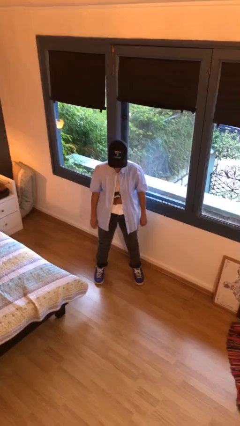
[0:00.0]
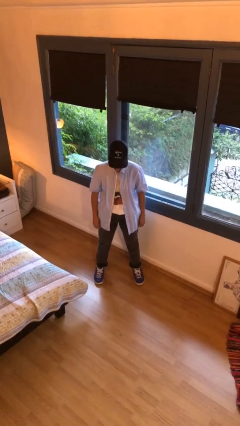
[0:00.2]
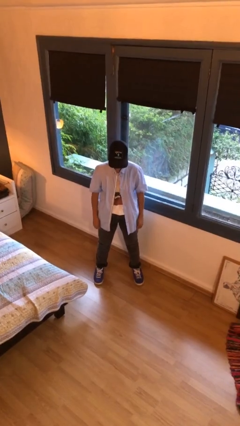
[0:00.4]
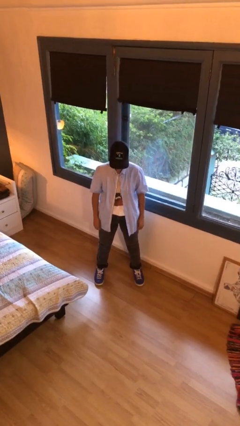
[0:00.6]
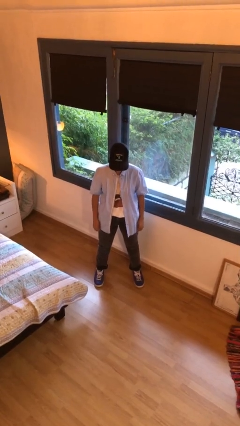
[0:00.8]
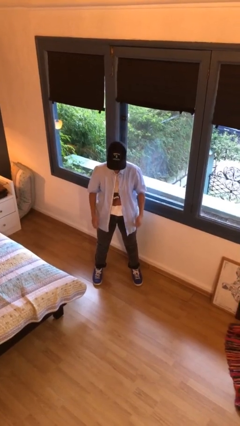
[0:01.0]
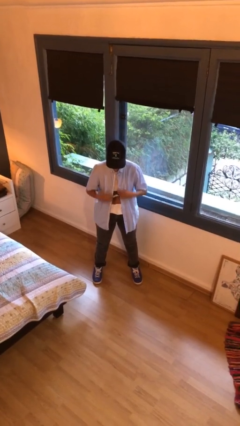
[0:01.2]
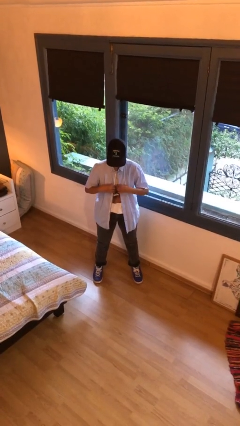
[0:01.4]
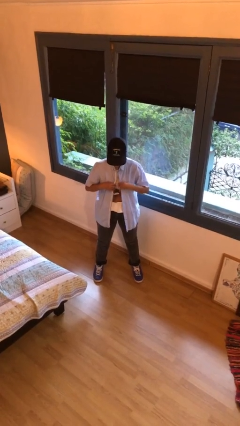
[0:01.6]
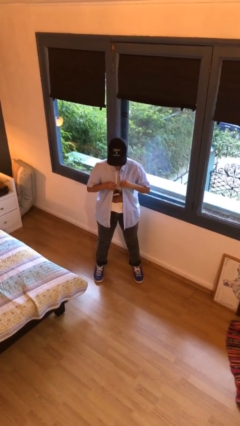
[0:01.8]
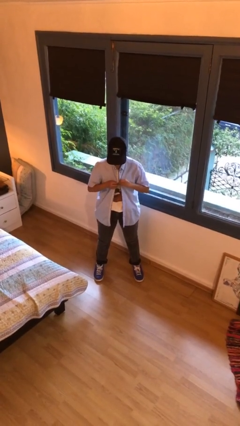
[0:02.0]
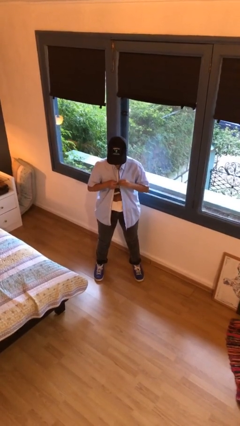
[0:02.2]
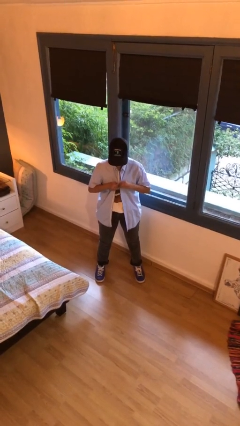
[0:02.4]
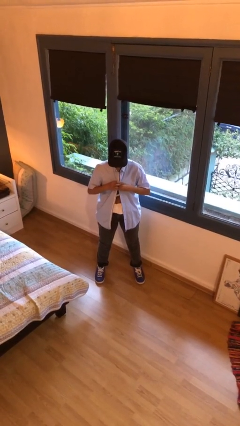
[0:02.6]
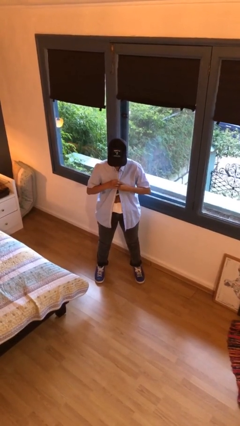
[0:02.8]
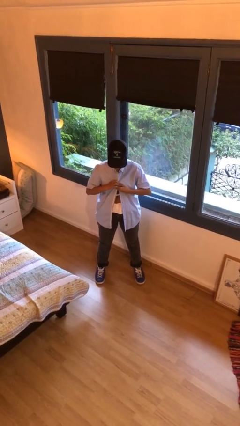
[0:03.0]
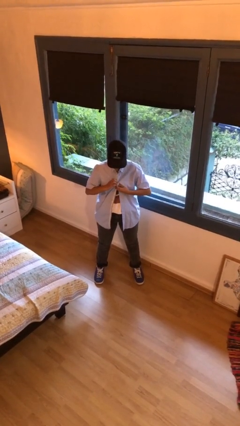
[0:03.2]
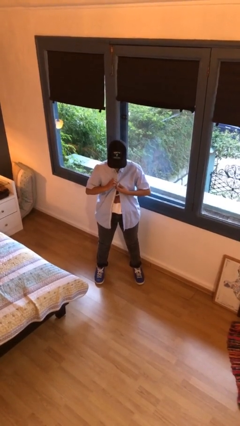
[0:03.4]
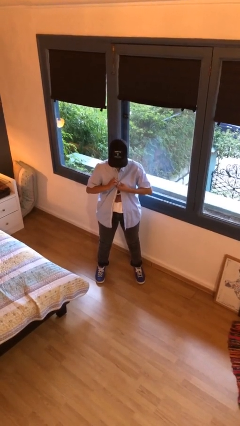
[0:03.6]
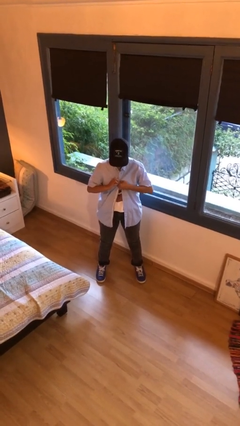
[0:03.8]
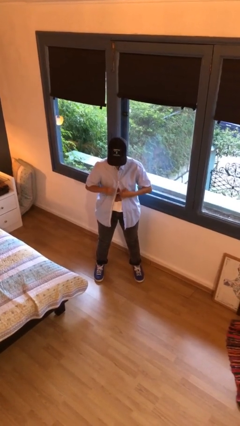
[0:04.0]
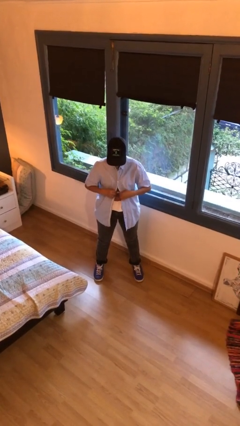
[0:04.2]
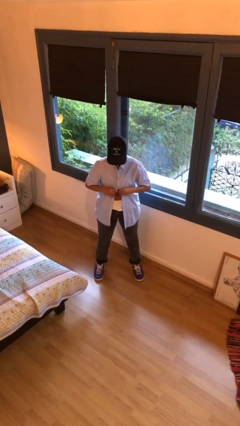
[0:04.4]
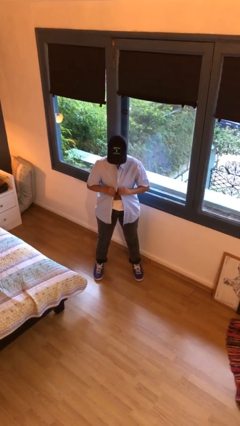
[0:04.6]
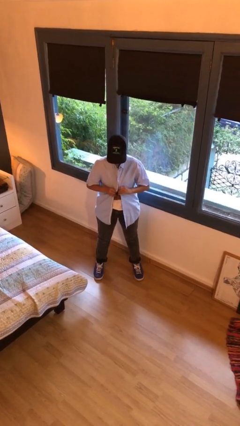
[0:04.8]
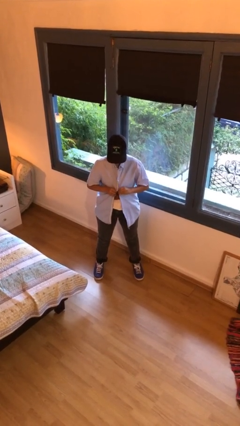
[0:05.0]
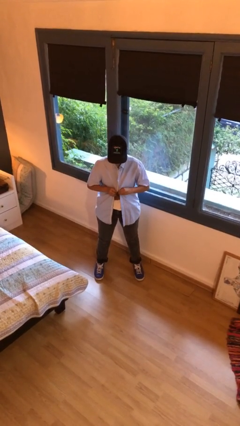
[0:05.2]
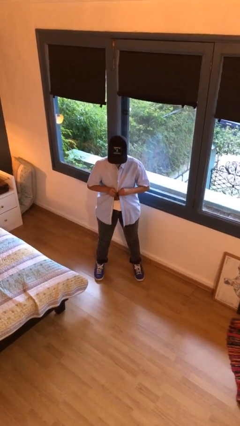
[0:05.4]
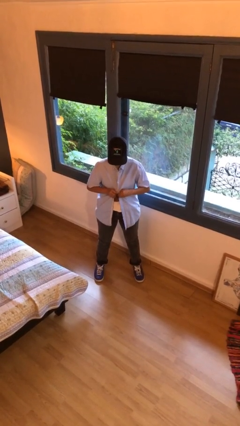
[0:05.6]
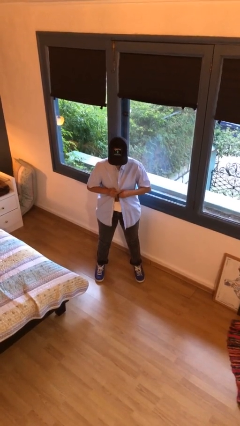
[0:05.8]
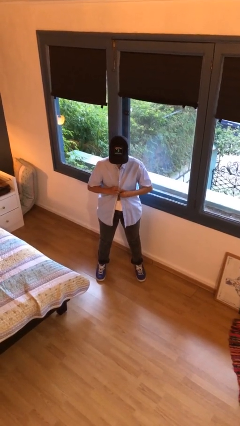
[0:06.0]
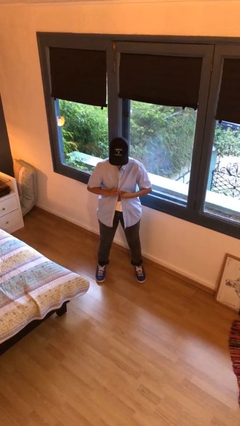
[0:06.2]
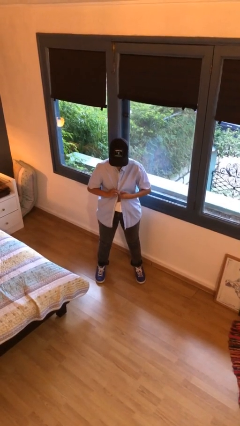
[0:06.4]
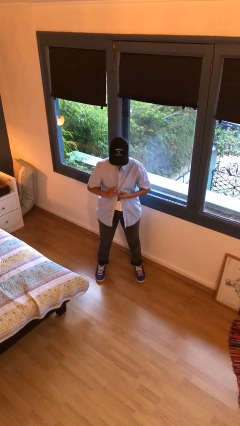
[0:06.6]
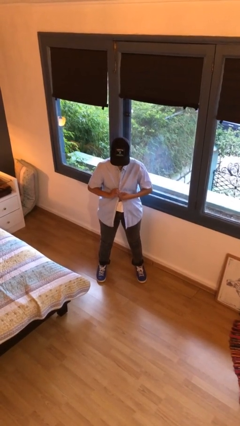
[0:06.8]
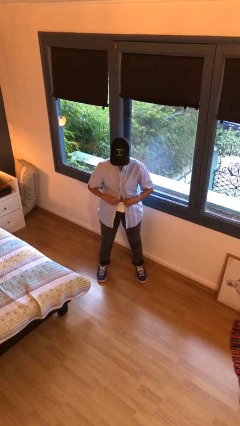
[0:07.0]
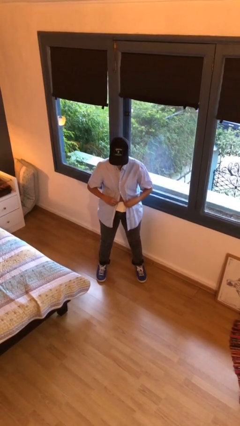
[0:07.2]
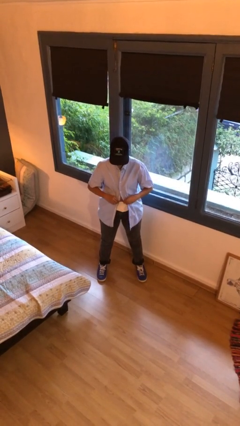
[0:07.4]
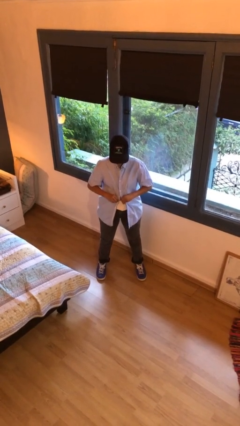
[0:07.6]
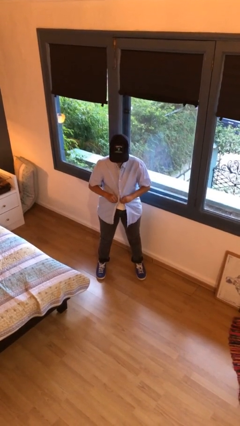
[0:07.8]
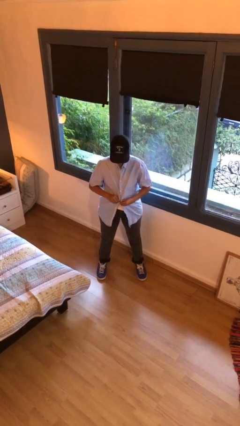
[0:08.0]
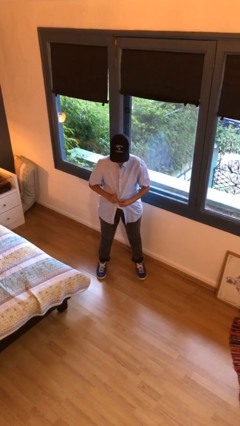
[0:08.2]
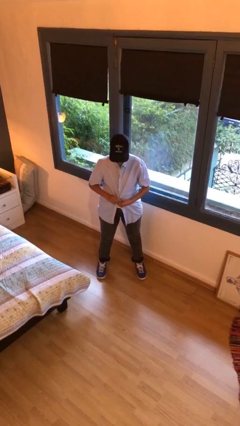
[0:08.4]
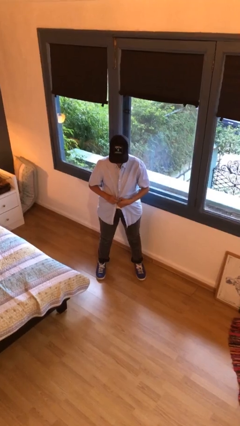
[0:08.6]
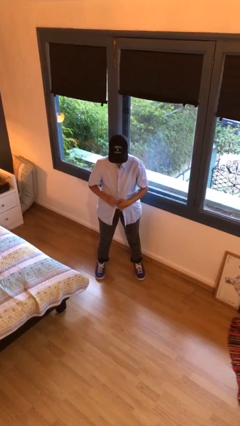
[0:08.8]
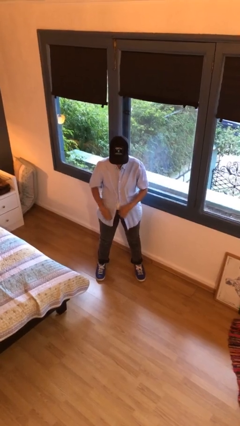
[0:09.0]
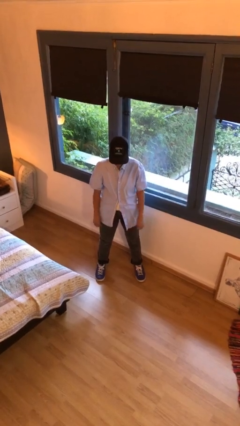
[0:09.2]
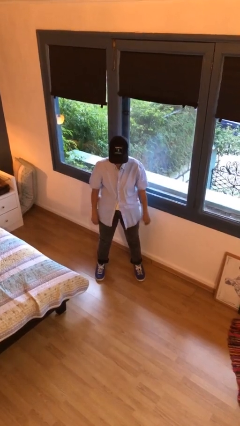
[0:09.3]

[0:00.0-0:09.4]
person buttons shirt

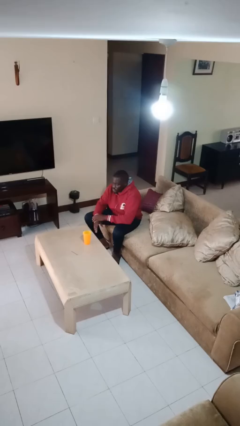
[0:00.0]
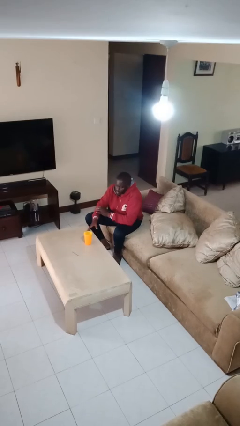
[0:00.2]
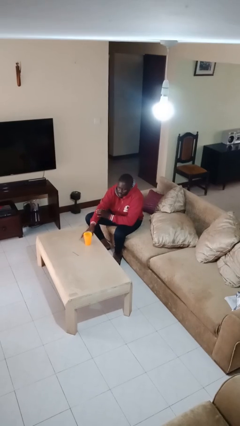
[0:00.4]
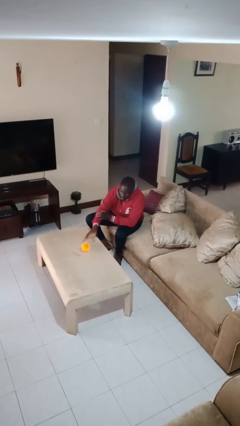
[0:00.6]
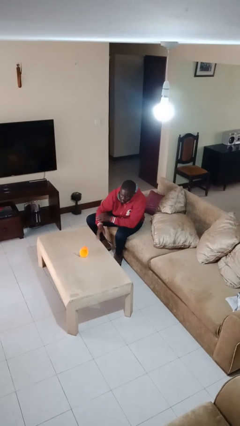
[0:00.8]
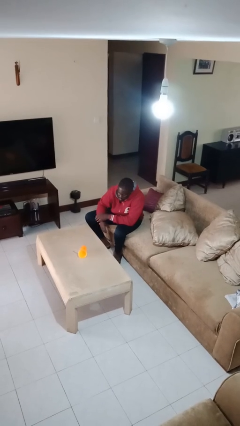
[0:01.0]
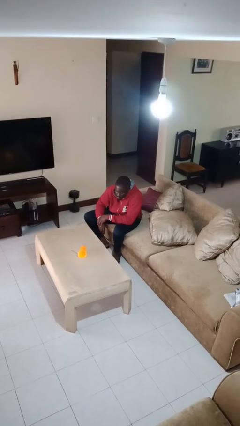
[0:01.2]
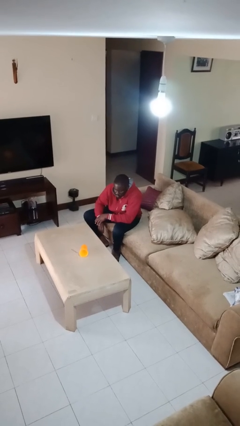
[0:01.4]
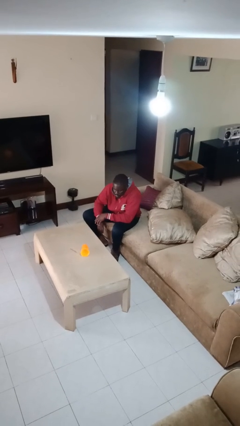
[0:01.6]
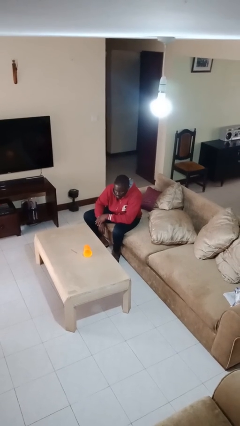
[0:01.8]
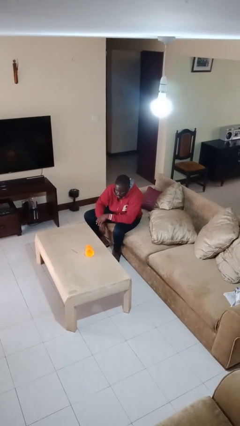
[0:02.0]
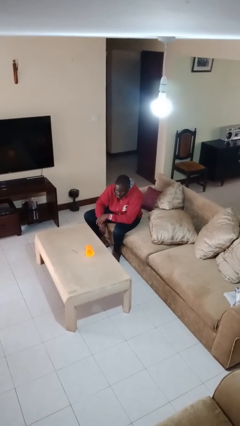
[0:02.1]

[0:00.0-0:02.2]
person knocks over glass

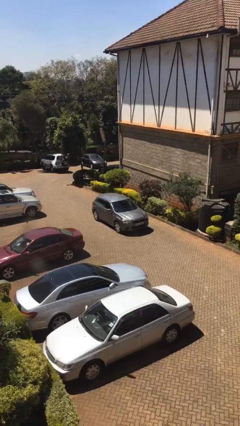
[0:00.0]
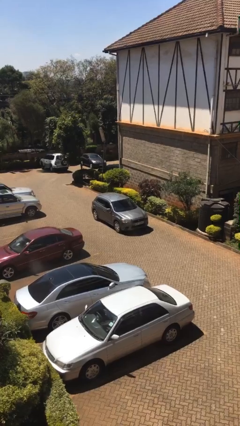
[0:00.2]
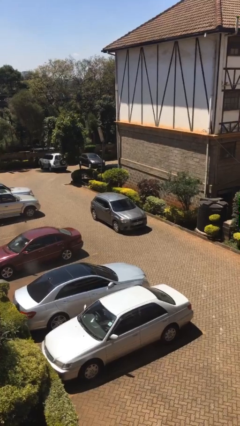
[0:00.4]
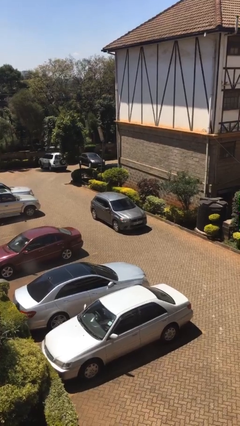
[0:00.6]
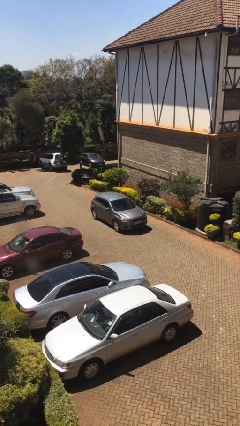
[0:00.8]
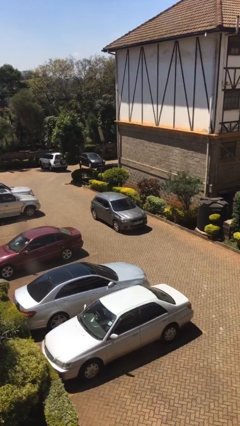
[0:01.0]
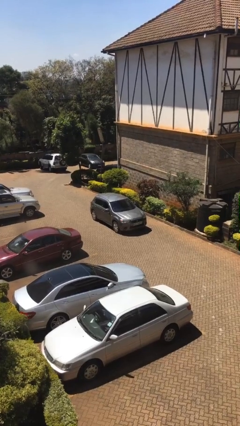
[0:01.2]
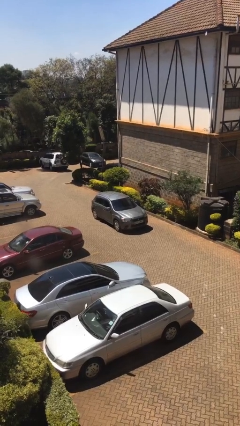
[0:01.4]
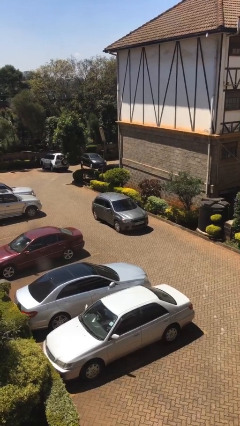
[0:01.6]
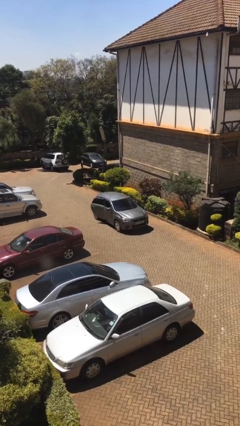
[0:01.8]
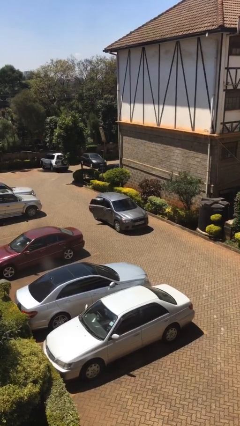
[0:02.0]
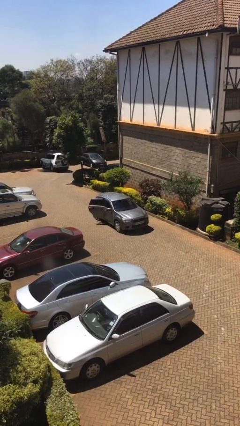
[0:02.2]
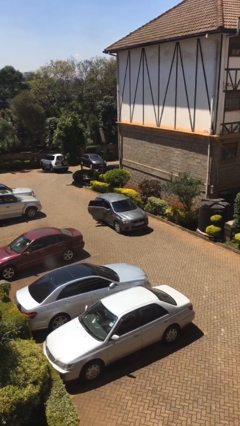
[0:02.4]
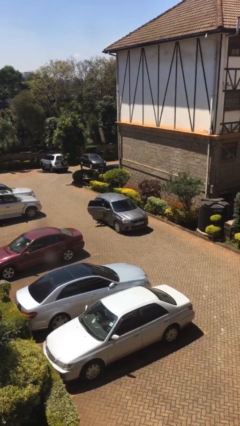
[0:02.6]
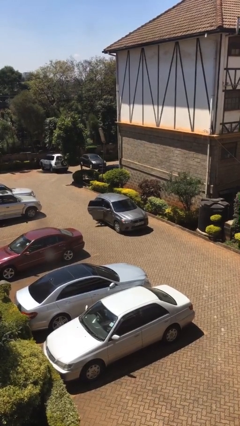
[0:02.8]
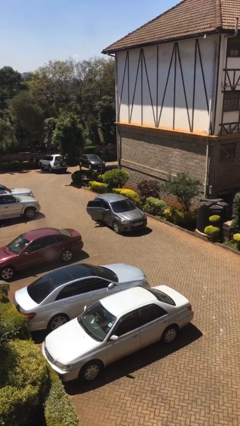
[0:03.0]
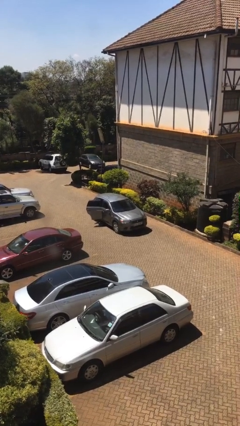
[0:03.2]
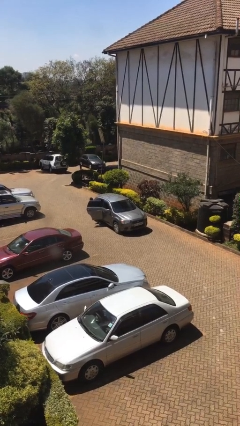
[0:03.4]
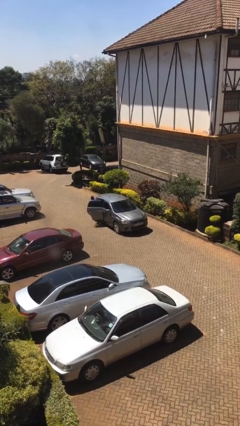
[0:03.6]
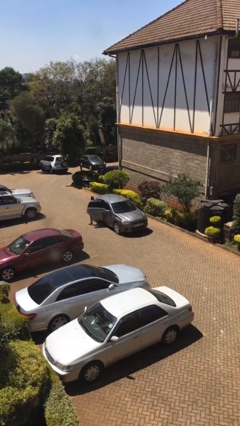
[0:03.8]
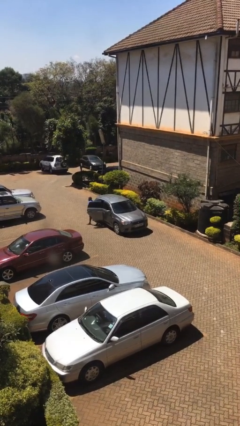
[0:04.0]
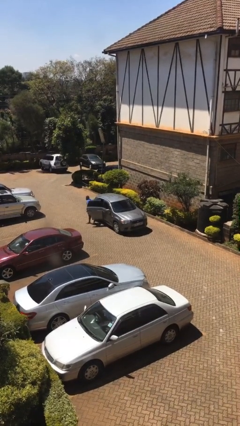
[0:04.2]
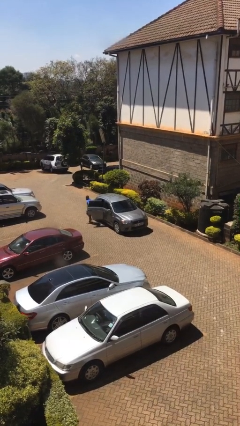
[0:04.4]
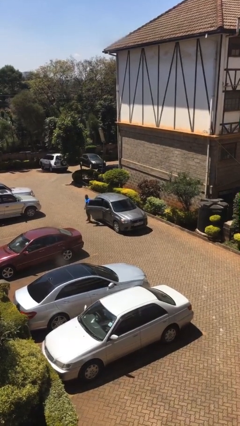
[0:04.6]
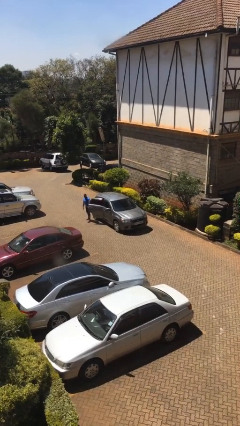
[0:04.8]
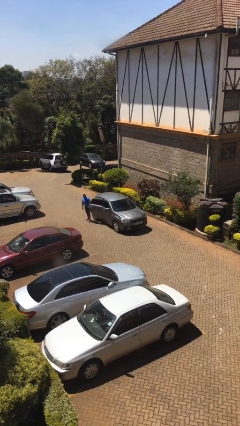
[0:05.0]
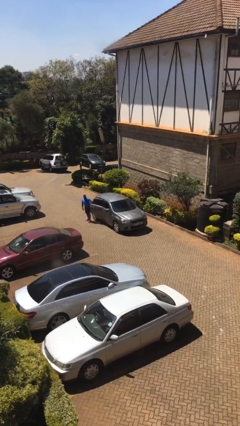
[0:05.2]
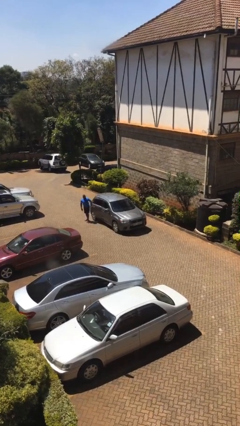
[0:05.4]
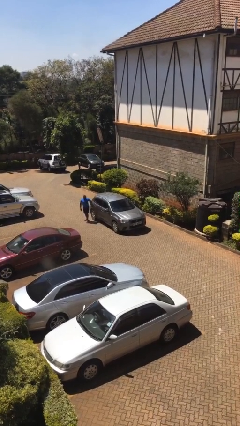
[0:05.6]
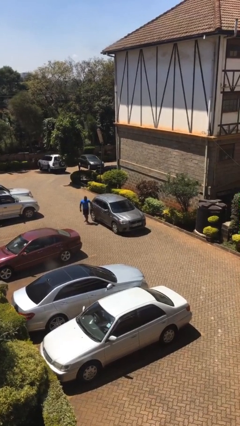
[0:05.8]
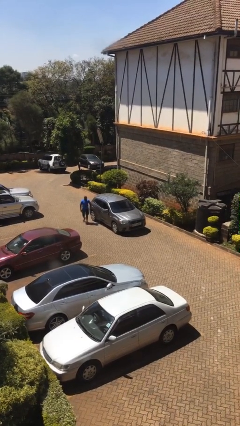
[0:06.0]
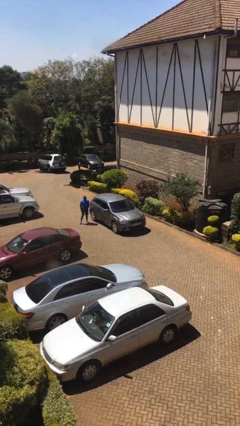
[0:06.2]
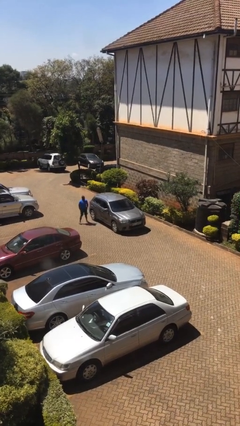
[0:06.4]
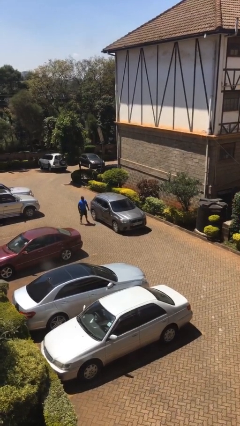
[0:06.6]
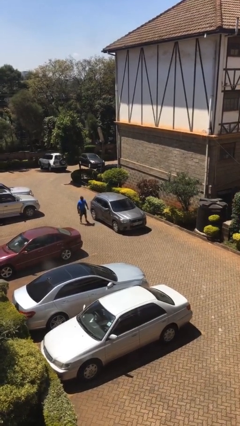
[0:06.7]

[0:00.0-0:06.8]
car drops off person
